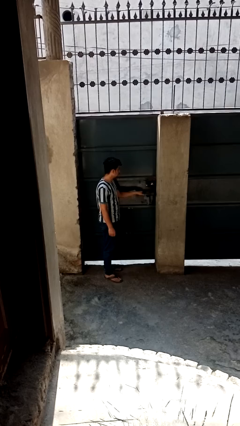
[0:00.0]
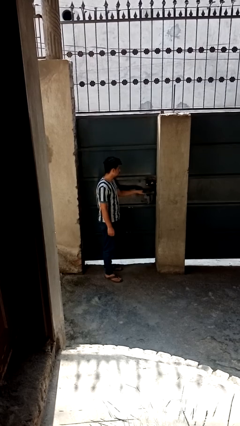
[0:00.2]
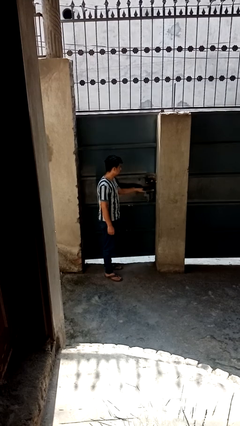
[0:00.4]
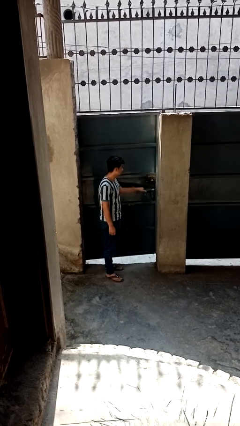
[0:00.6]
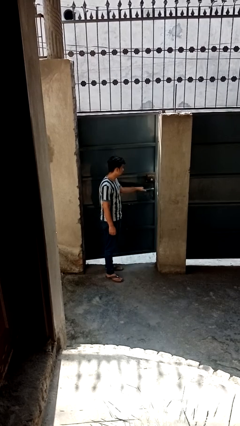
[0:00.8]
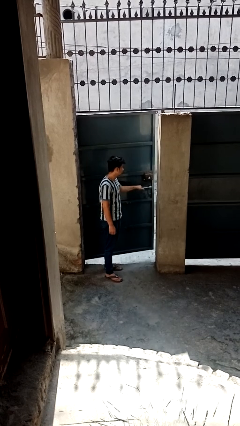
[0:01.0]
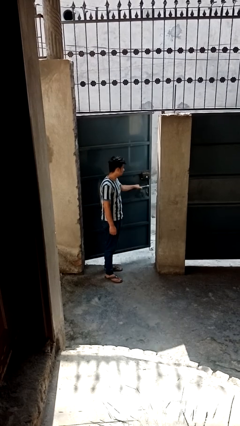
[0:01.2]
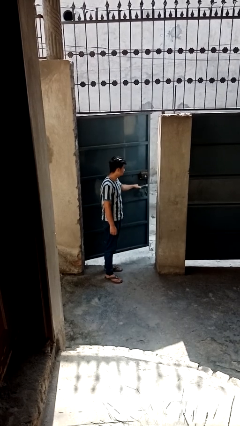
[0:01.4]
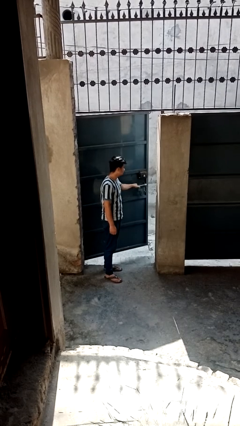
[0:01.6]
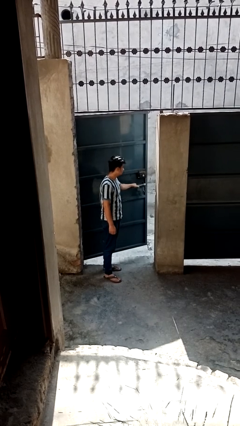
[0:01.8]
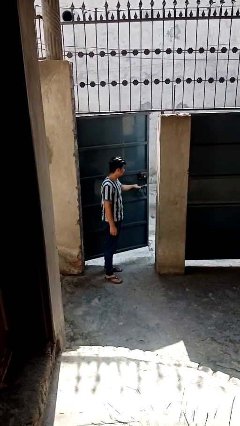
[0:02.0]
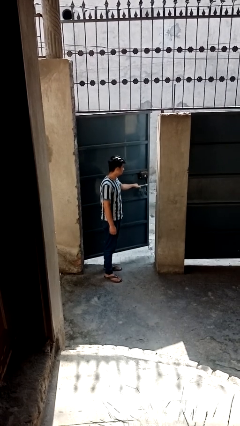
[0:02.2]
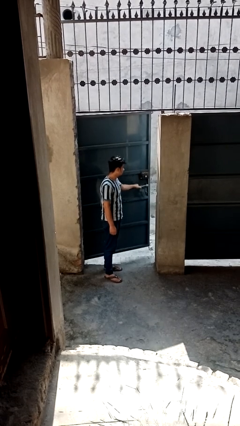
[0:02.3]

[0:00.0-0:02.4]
person opens gate

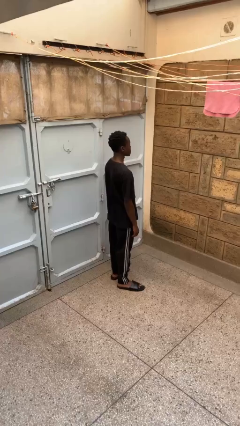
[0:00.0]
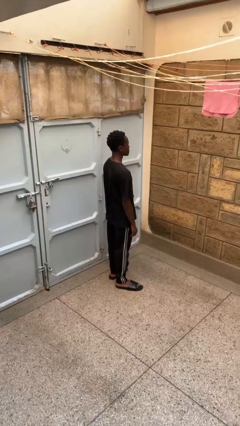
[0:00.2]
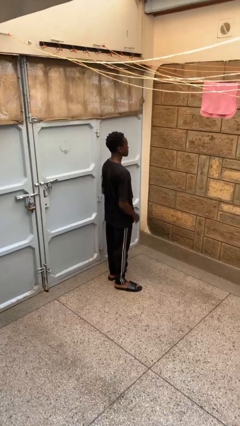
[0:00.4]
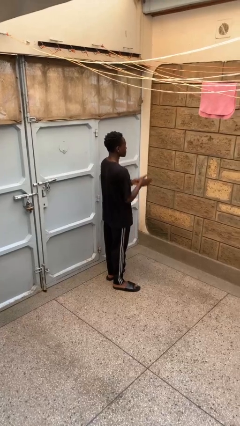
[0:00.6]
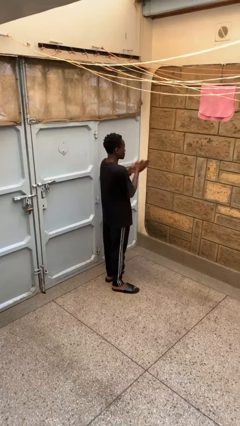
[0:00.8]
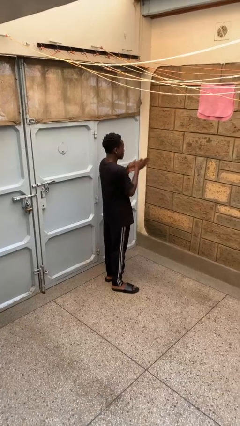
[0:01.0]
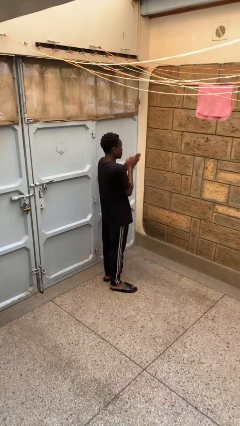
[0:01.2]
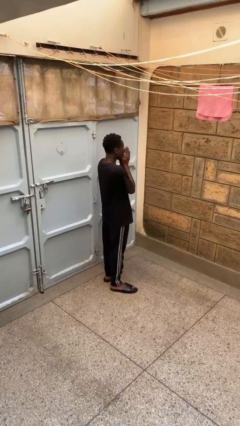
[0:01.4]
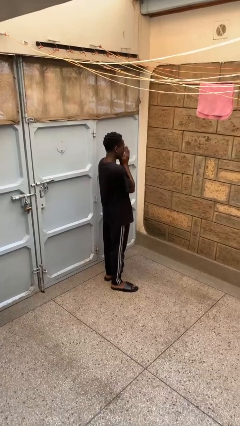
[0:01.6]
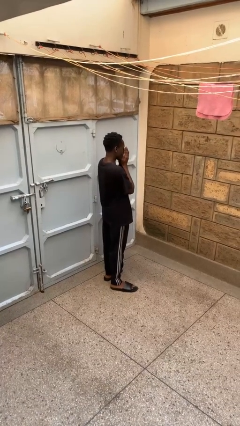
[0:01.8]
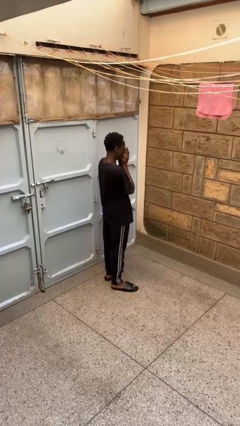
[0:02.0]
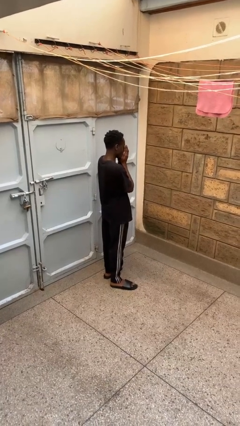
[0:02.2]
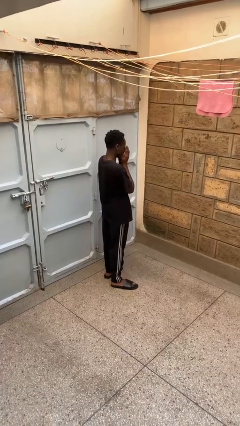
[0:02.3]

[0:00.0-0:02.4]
person blows into hands

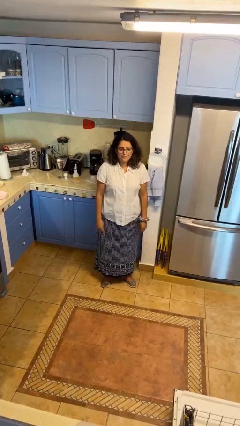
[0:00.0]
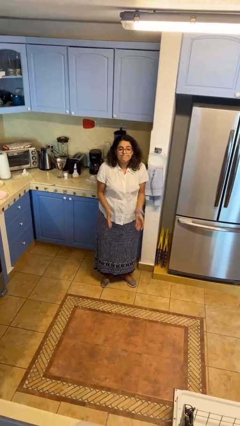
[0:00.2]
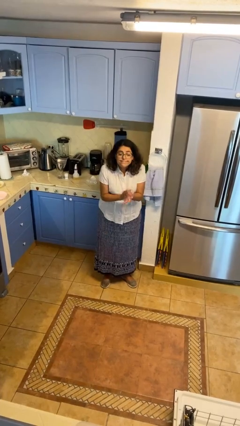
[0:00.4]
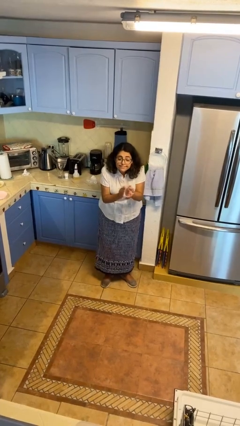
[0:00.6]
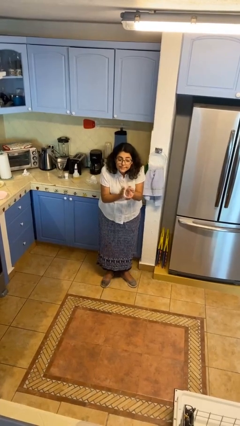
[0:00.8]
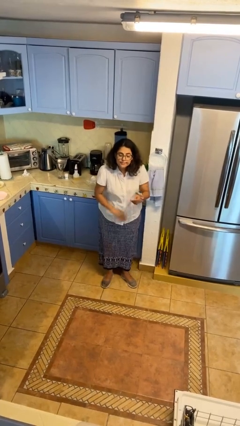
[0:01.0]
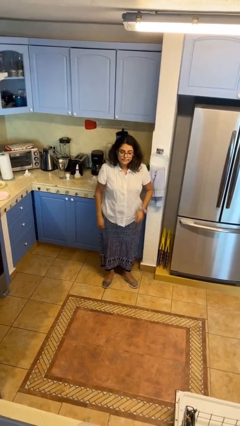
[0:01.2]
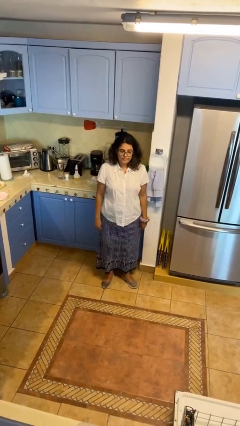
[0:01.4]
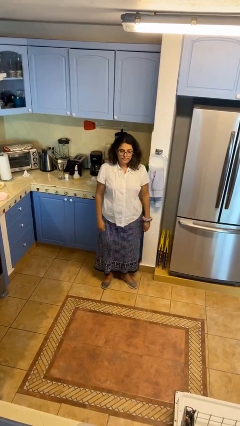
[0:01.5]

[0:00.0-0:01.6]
person claps hands

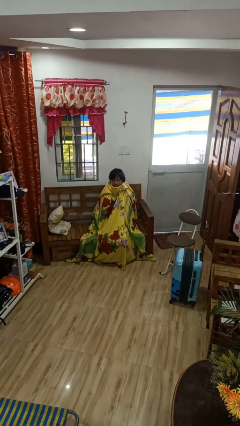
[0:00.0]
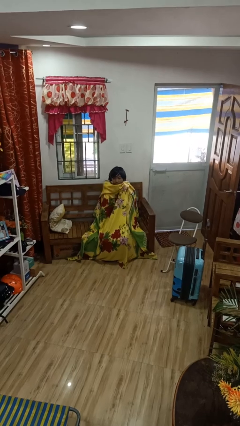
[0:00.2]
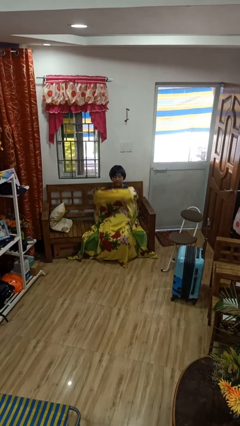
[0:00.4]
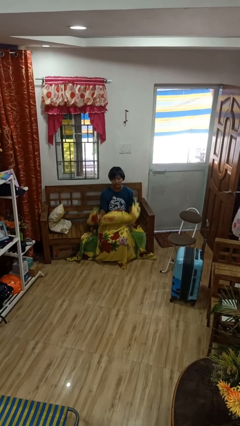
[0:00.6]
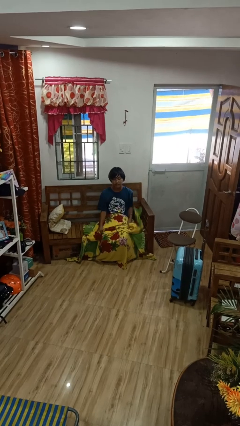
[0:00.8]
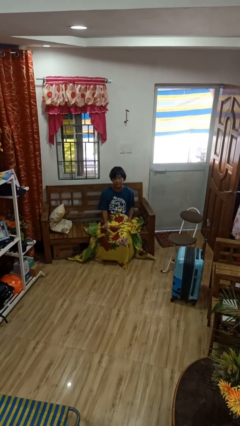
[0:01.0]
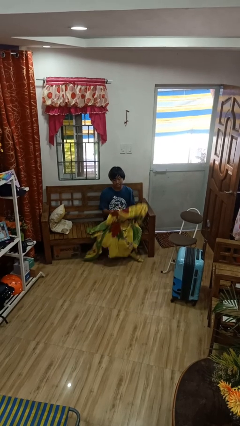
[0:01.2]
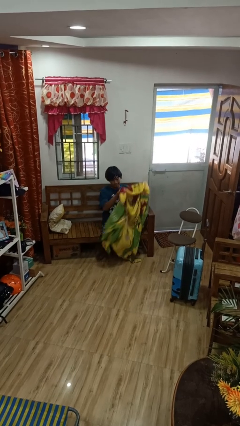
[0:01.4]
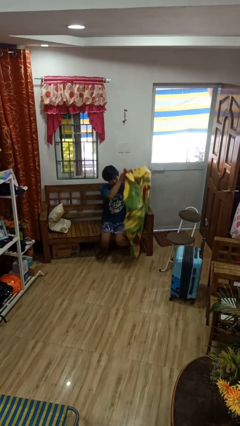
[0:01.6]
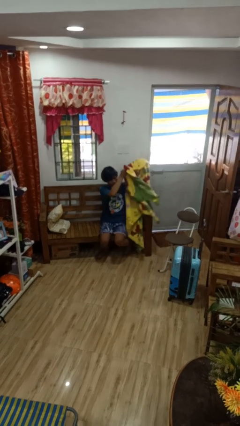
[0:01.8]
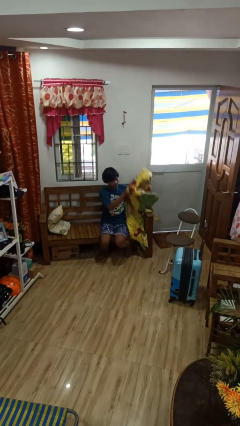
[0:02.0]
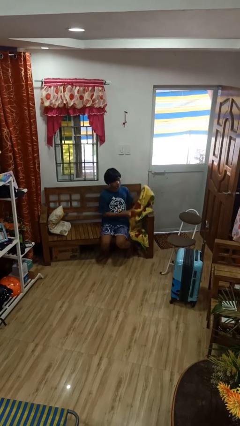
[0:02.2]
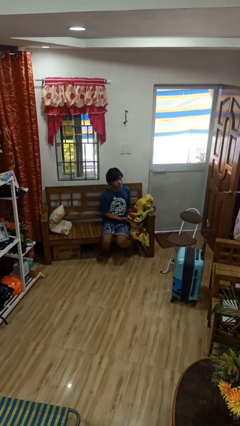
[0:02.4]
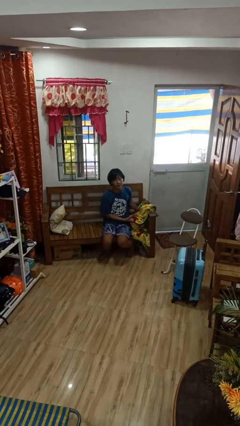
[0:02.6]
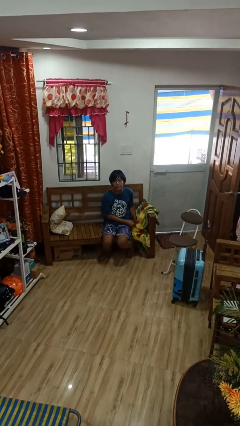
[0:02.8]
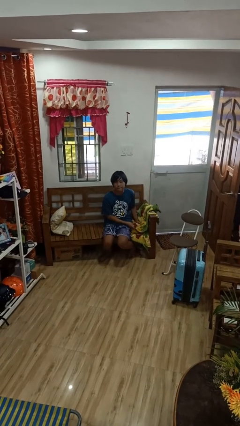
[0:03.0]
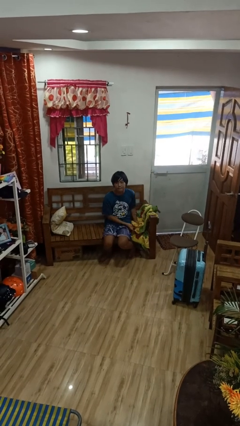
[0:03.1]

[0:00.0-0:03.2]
person uncovers with blanket

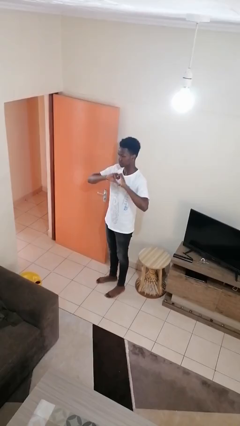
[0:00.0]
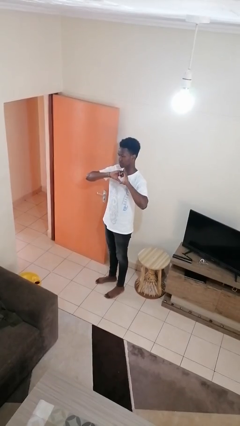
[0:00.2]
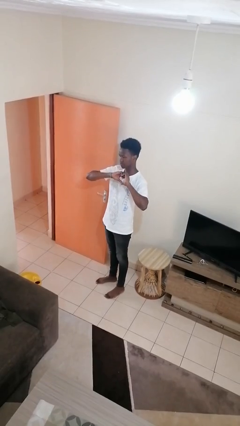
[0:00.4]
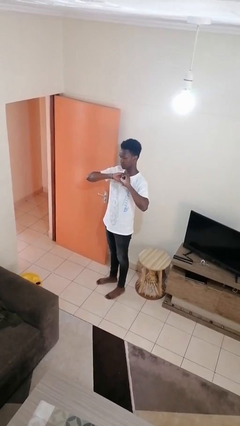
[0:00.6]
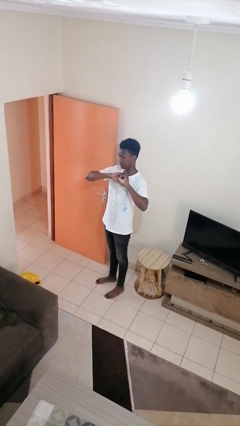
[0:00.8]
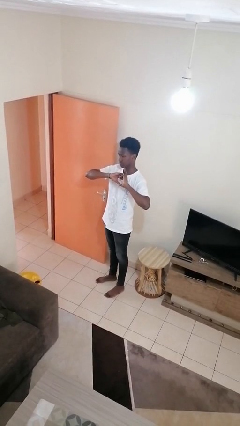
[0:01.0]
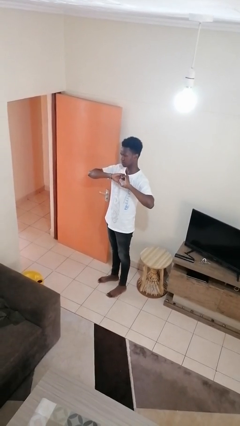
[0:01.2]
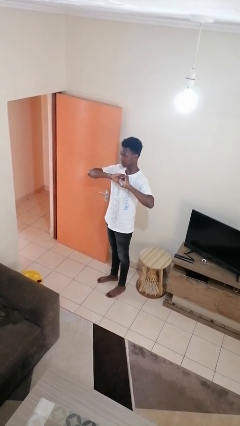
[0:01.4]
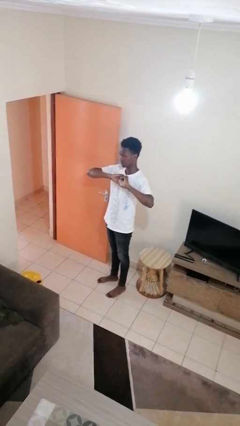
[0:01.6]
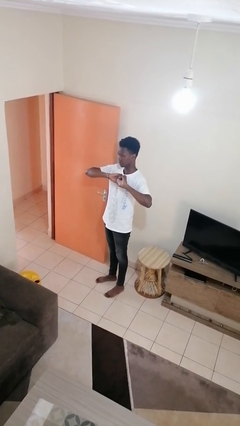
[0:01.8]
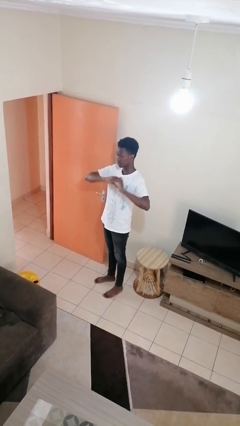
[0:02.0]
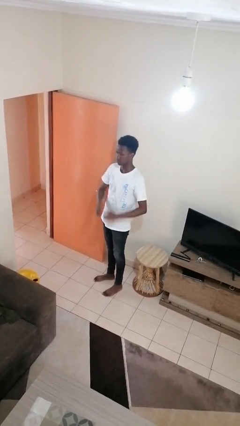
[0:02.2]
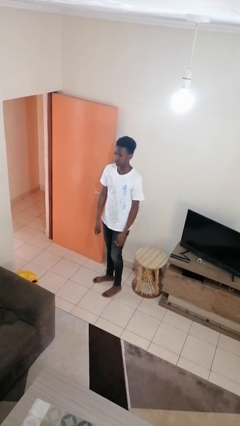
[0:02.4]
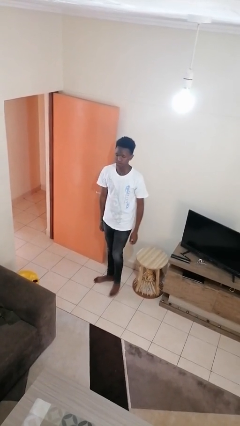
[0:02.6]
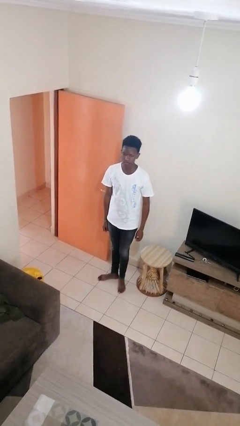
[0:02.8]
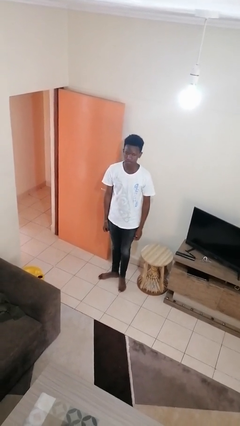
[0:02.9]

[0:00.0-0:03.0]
person gestures heart

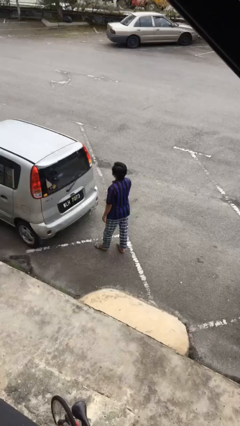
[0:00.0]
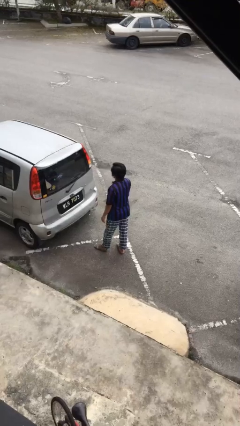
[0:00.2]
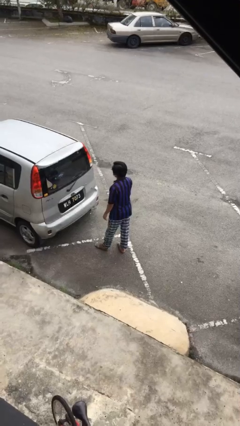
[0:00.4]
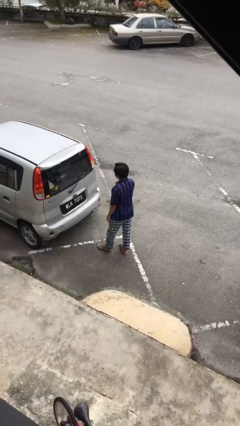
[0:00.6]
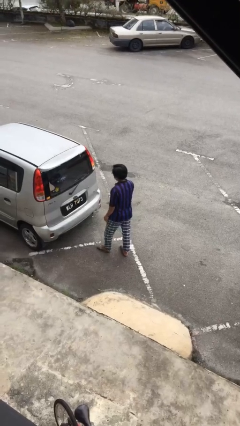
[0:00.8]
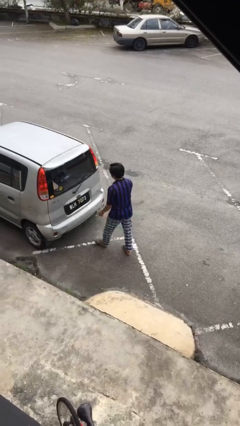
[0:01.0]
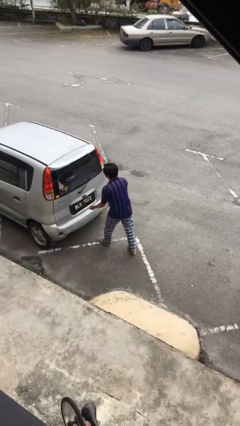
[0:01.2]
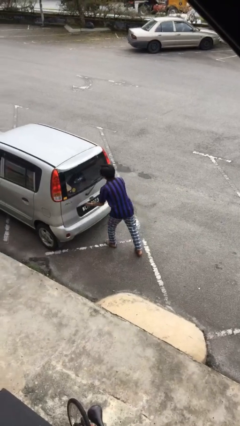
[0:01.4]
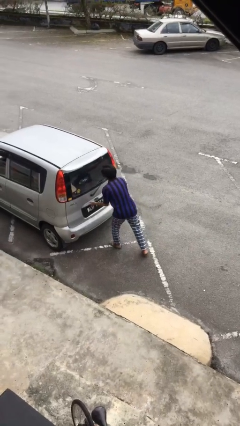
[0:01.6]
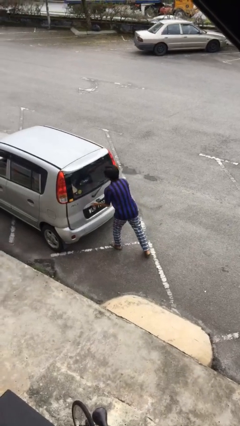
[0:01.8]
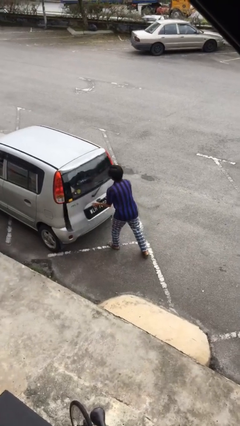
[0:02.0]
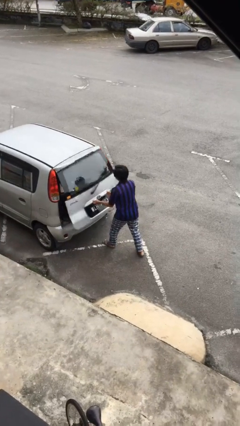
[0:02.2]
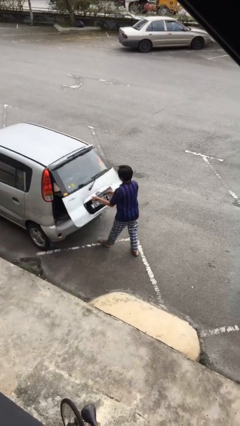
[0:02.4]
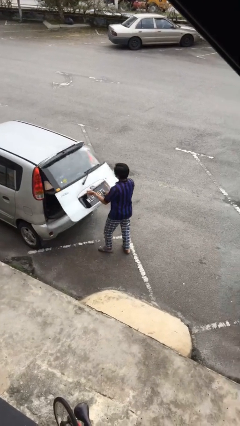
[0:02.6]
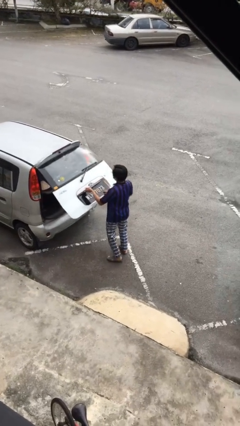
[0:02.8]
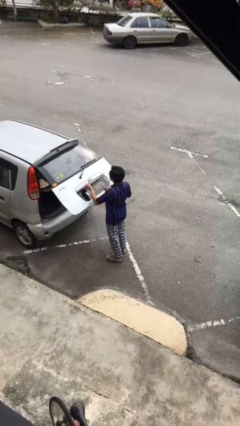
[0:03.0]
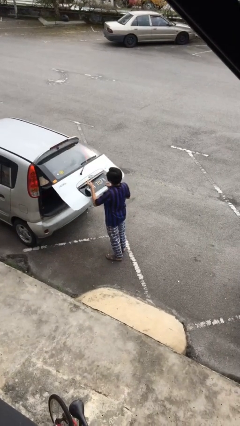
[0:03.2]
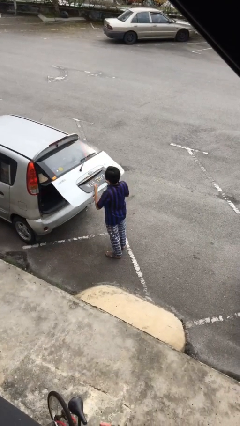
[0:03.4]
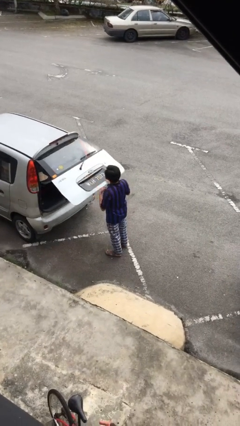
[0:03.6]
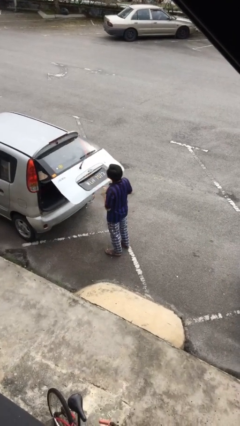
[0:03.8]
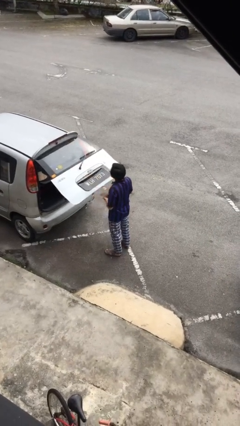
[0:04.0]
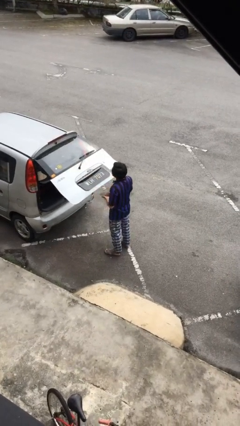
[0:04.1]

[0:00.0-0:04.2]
person opens car trunk

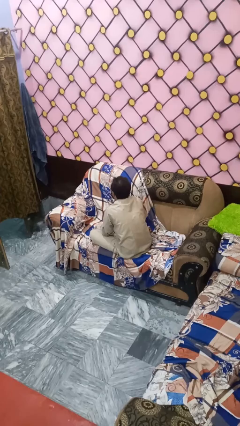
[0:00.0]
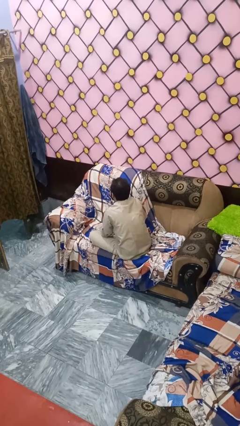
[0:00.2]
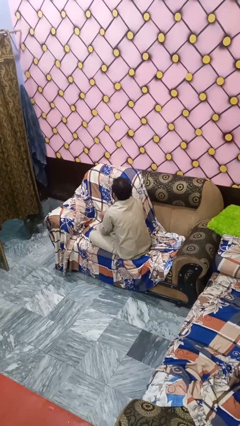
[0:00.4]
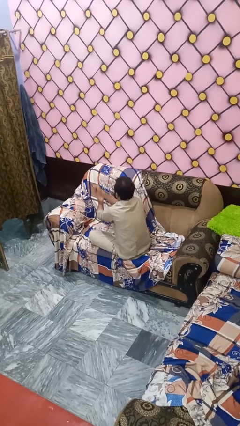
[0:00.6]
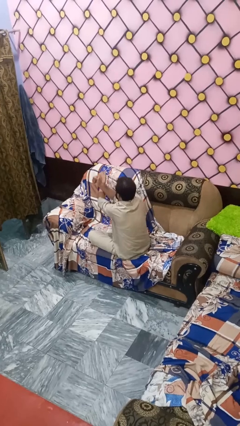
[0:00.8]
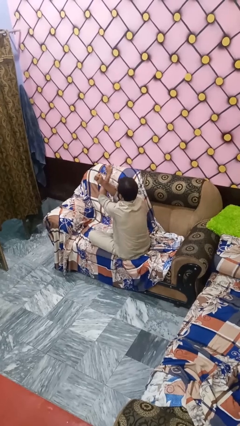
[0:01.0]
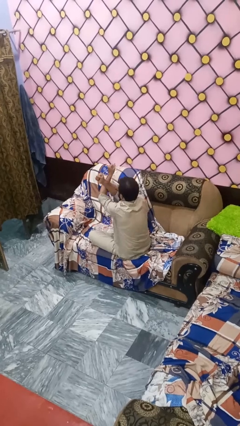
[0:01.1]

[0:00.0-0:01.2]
person gestures arms x
